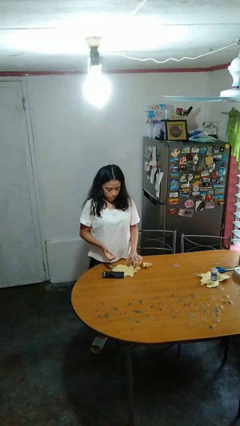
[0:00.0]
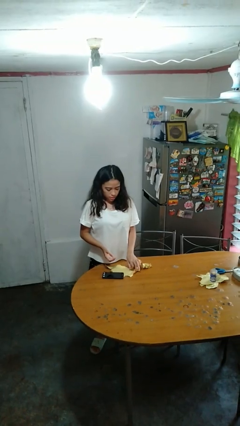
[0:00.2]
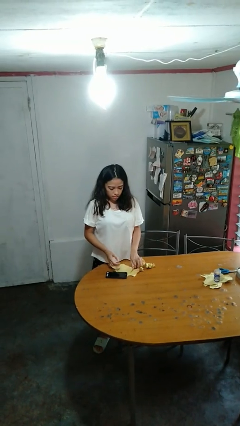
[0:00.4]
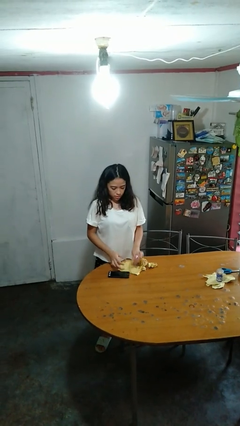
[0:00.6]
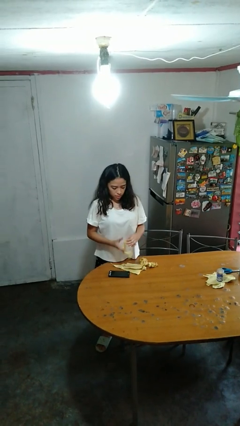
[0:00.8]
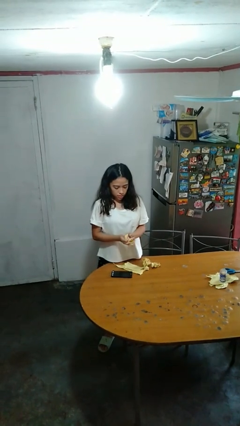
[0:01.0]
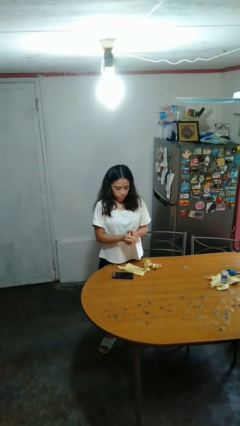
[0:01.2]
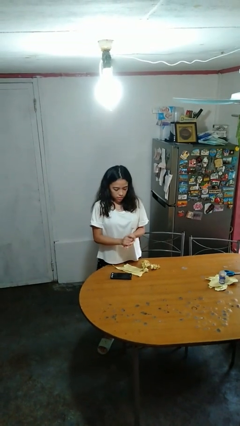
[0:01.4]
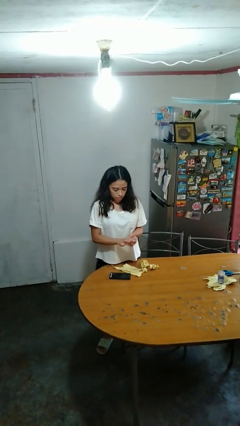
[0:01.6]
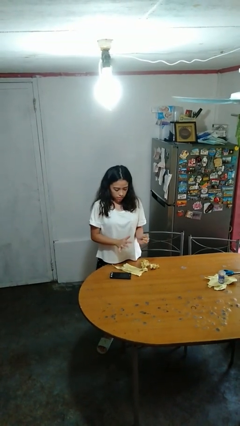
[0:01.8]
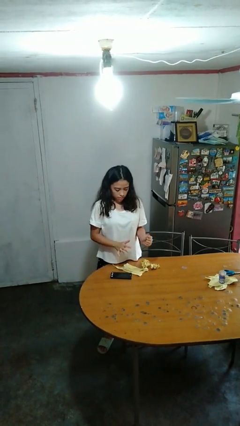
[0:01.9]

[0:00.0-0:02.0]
person crumples paper

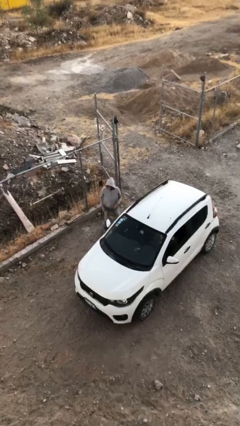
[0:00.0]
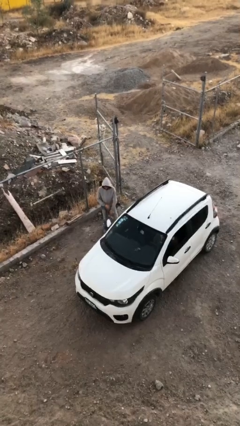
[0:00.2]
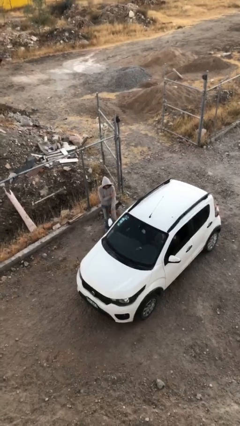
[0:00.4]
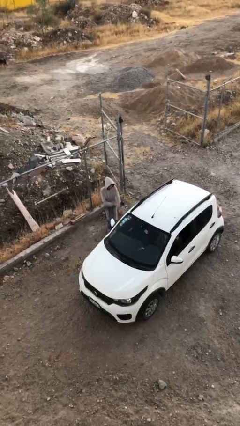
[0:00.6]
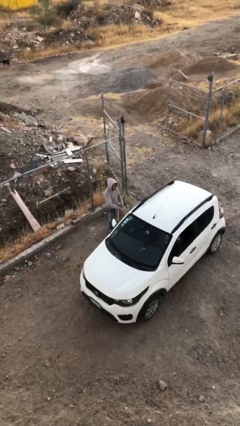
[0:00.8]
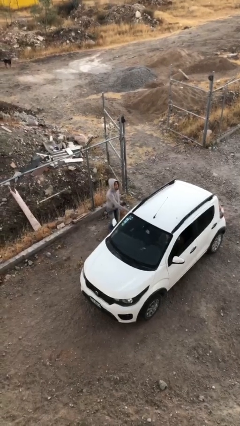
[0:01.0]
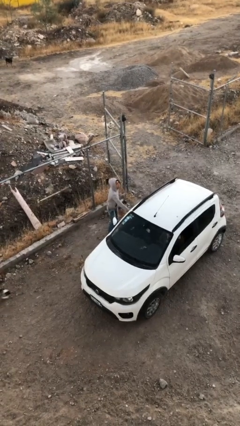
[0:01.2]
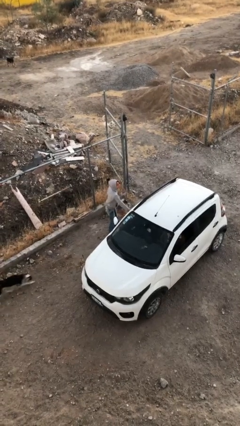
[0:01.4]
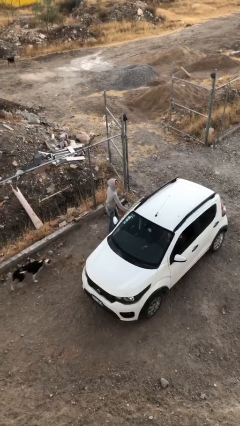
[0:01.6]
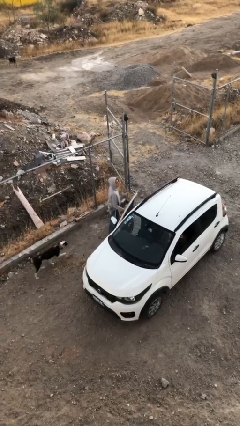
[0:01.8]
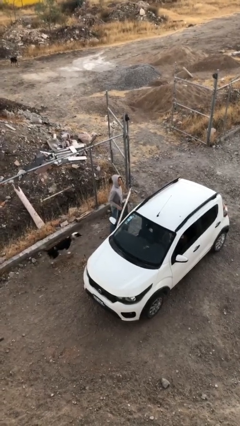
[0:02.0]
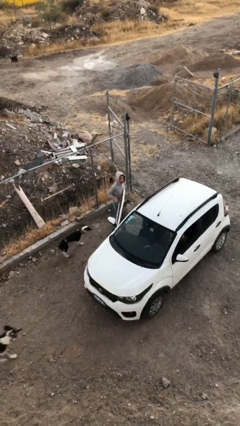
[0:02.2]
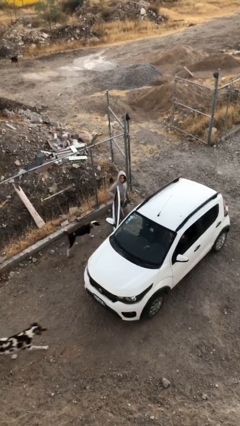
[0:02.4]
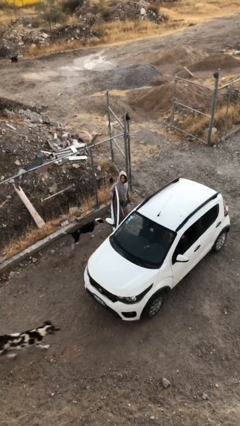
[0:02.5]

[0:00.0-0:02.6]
person opens car door

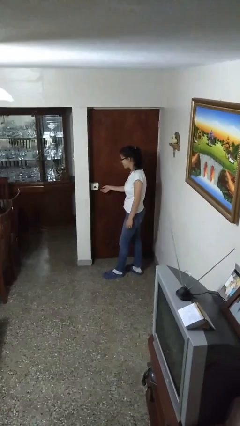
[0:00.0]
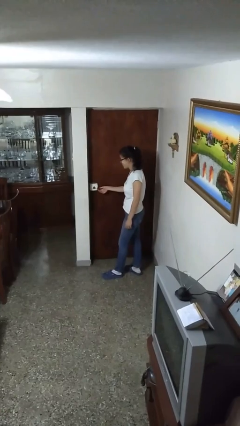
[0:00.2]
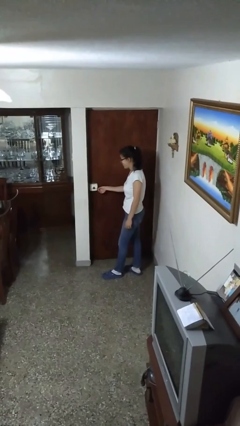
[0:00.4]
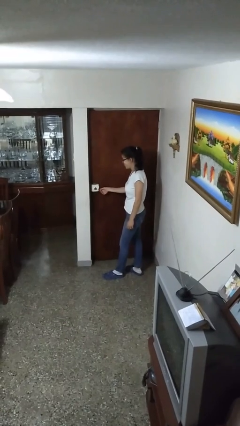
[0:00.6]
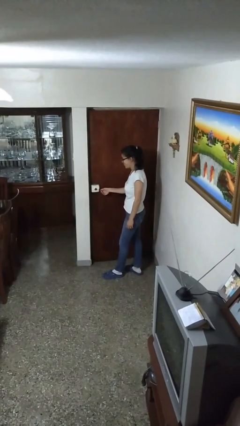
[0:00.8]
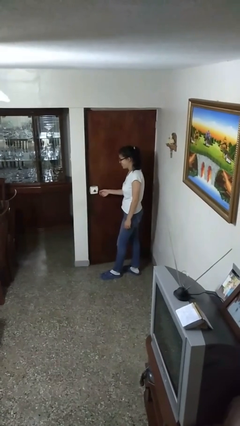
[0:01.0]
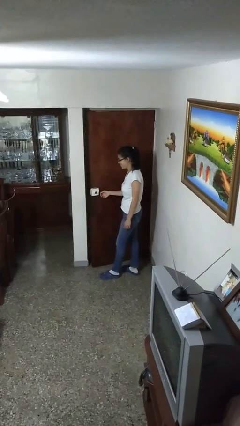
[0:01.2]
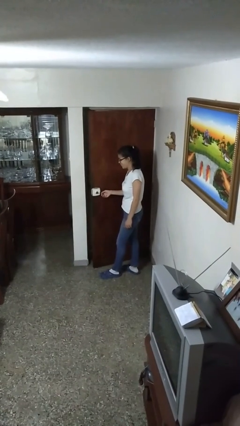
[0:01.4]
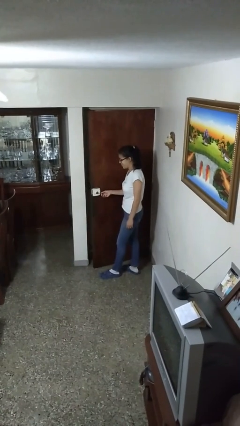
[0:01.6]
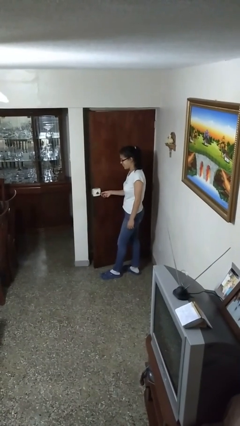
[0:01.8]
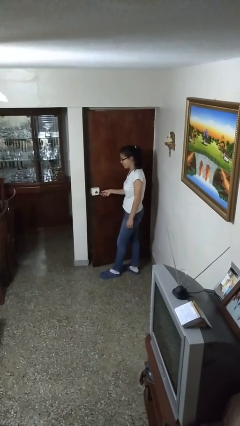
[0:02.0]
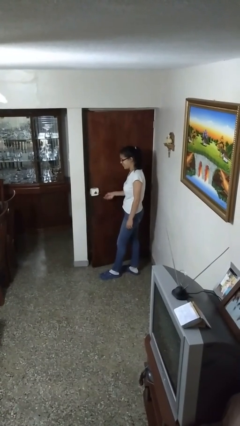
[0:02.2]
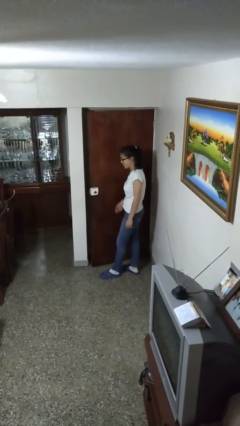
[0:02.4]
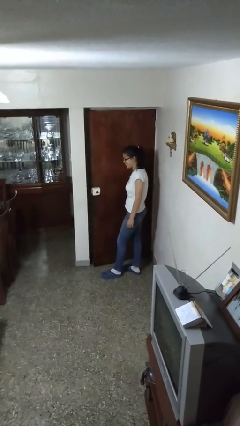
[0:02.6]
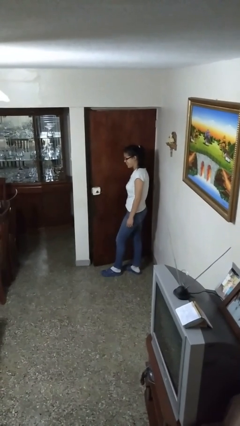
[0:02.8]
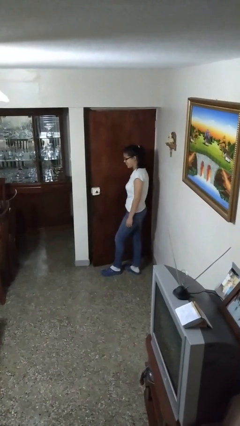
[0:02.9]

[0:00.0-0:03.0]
person opens facility door

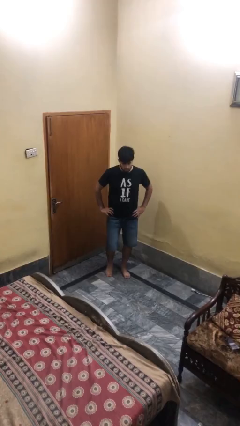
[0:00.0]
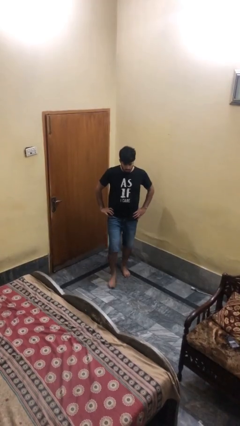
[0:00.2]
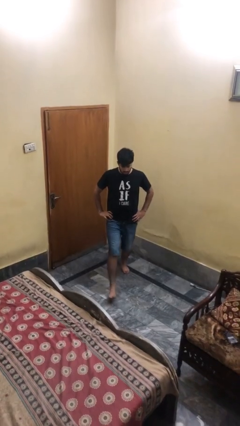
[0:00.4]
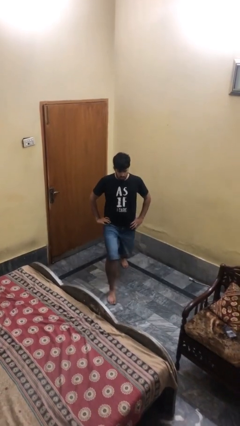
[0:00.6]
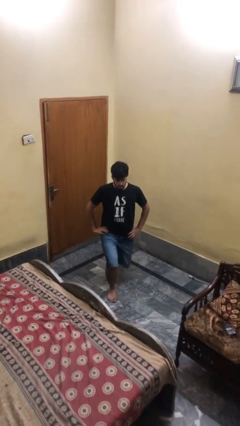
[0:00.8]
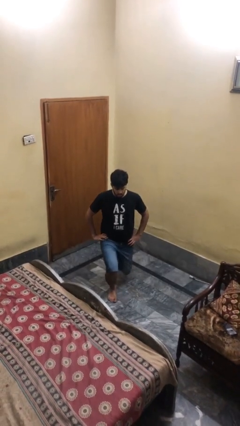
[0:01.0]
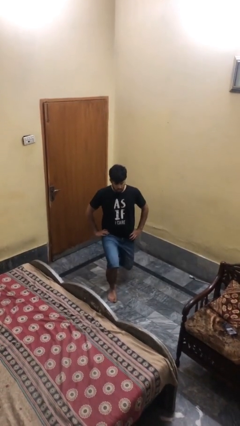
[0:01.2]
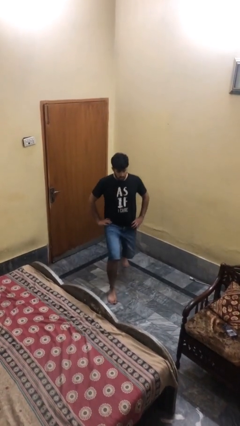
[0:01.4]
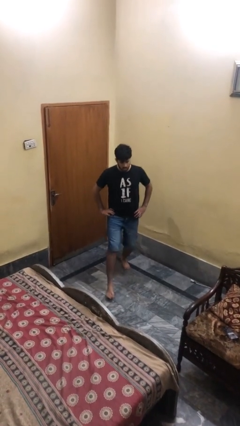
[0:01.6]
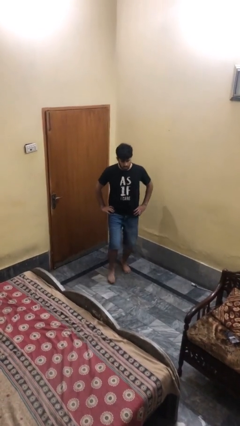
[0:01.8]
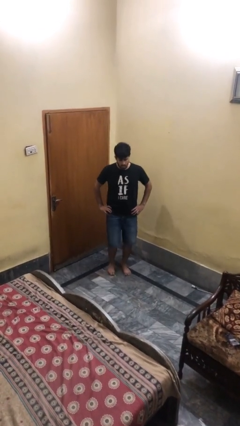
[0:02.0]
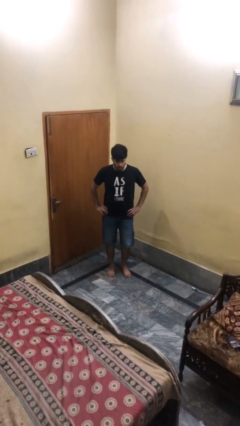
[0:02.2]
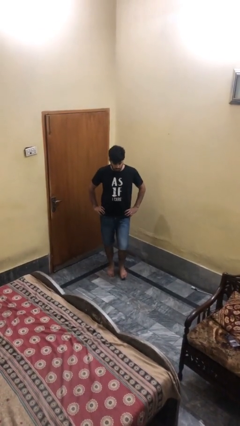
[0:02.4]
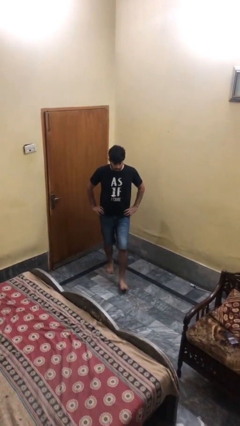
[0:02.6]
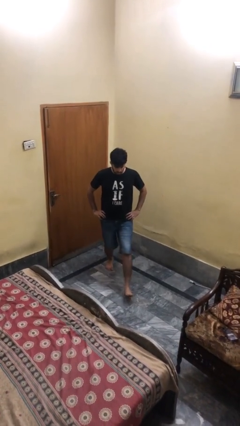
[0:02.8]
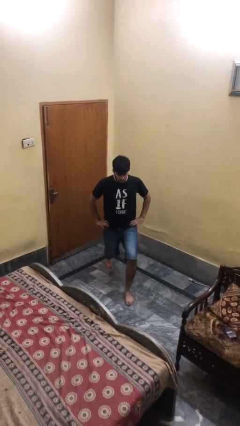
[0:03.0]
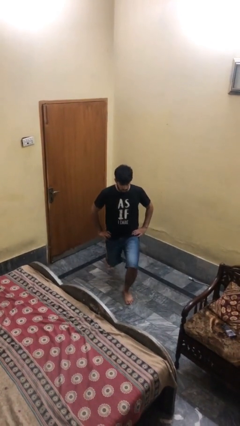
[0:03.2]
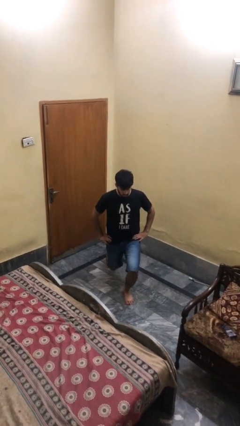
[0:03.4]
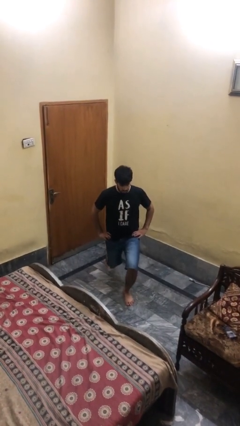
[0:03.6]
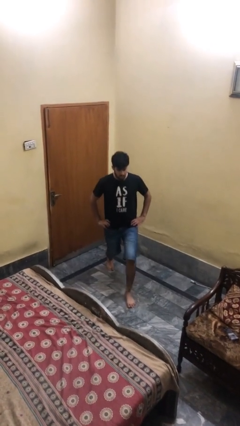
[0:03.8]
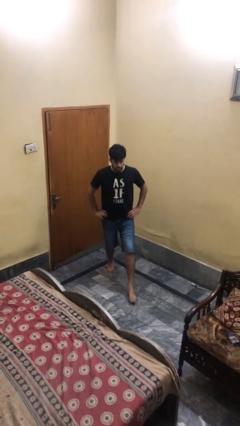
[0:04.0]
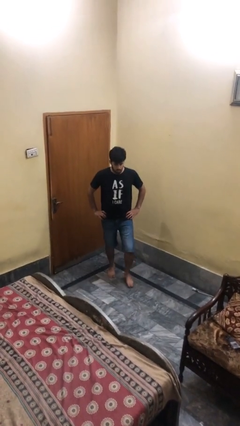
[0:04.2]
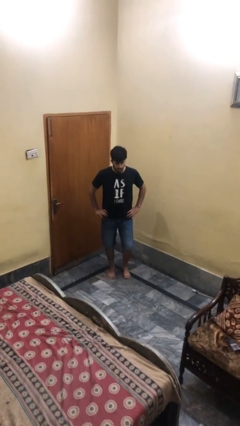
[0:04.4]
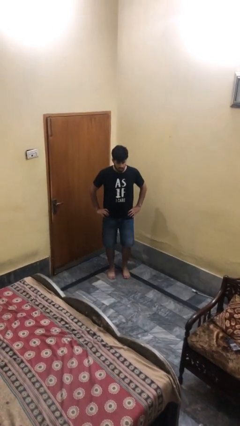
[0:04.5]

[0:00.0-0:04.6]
person exercises with lunges

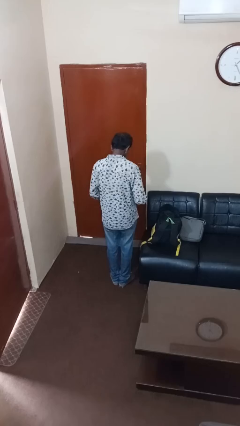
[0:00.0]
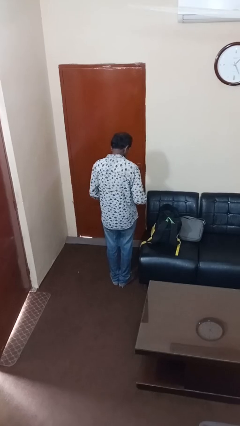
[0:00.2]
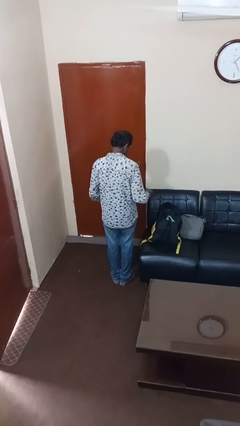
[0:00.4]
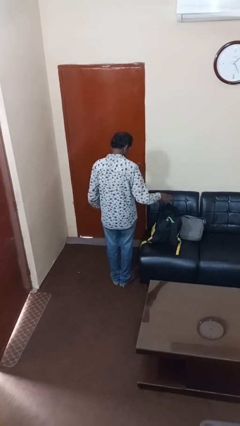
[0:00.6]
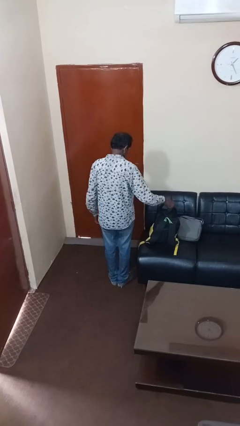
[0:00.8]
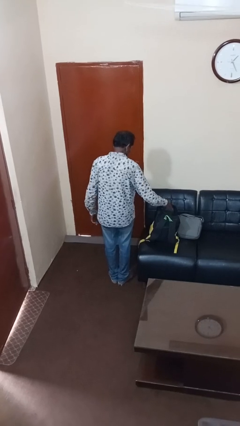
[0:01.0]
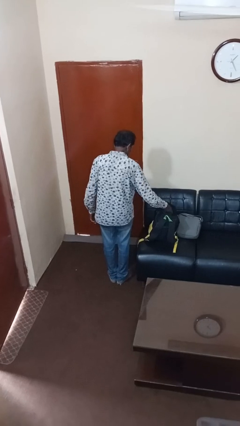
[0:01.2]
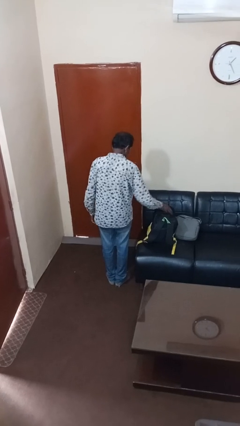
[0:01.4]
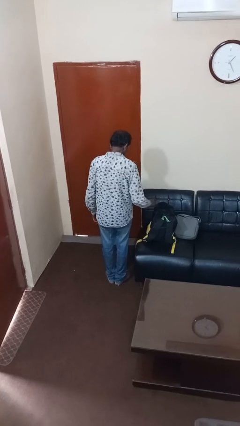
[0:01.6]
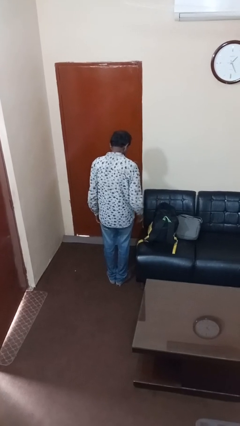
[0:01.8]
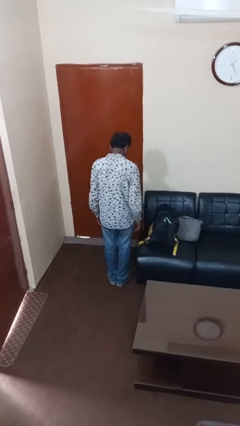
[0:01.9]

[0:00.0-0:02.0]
person puts object into backpack

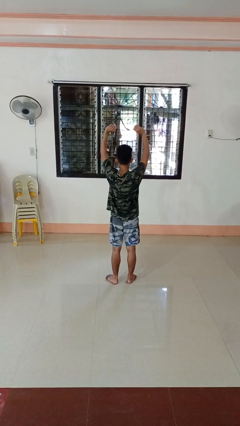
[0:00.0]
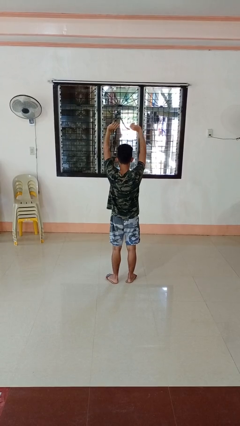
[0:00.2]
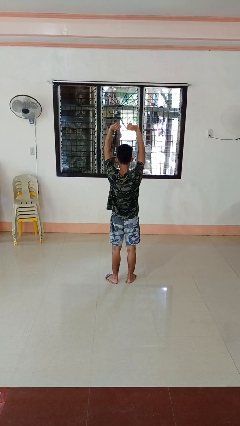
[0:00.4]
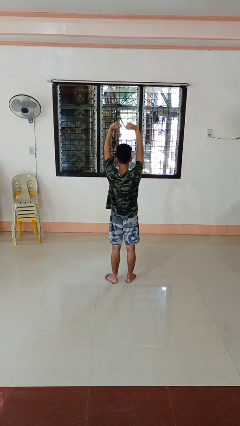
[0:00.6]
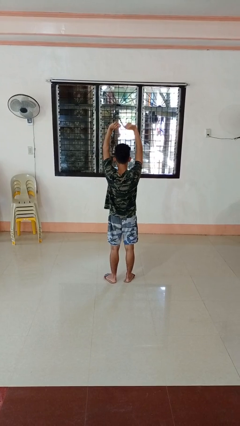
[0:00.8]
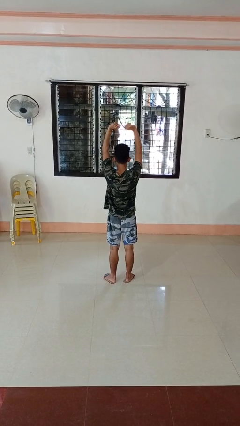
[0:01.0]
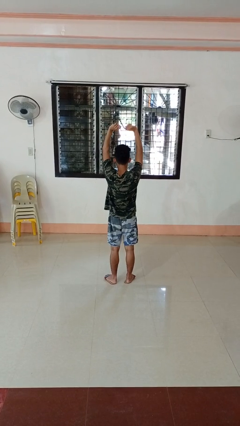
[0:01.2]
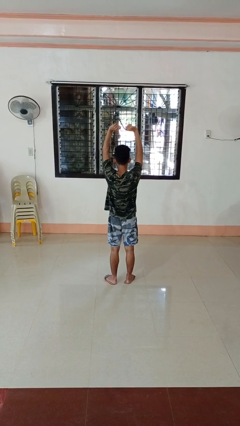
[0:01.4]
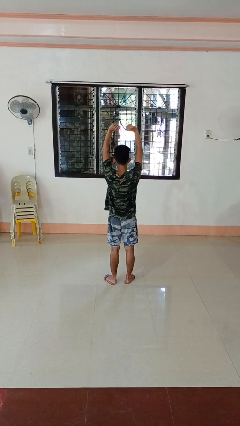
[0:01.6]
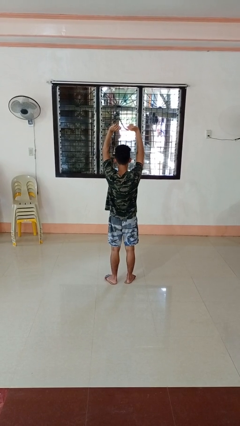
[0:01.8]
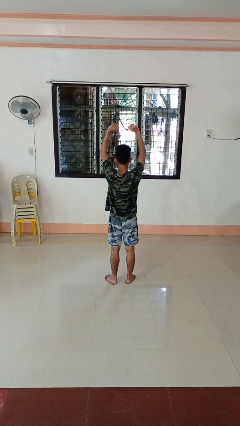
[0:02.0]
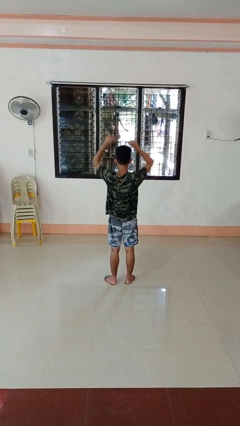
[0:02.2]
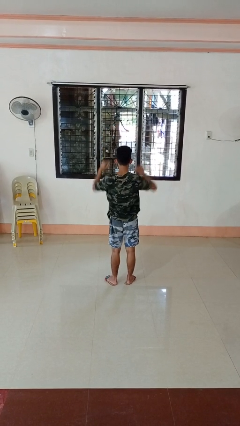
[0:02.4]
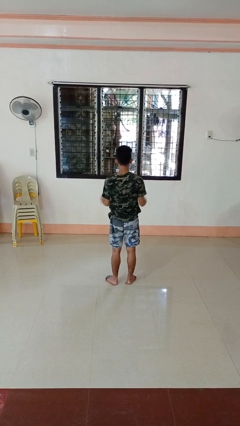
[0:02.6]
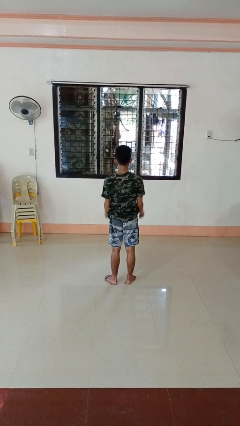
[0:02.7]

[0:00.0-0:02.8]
person stretches arms over head

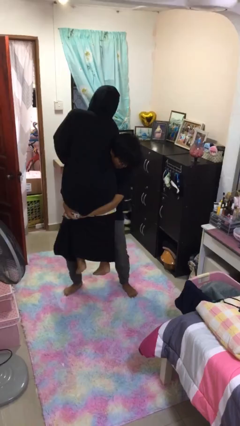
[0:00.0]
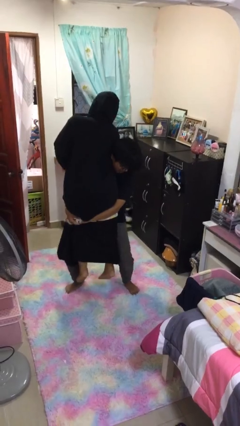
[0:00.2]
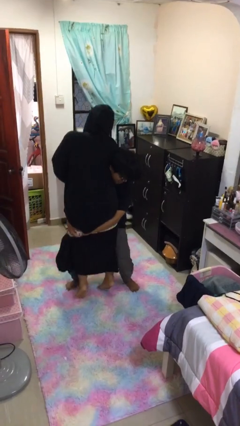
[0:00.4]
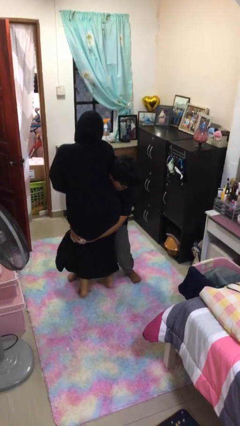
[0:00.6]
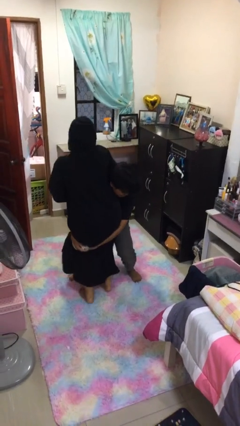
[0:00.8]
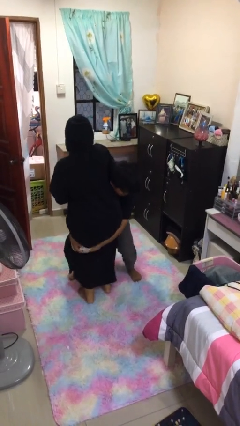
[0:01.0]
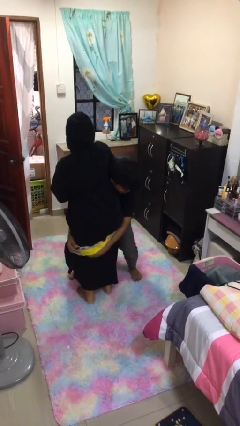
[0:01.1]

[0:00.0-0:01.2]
person puts down person
